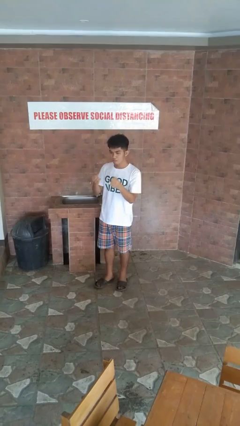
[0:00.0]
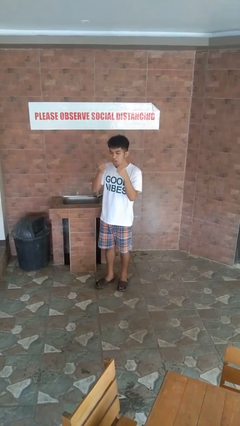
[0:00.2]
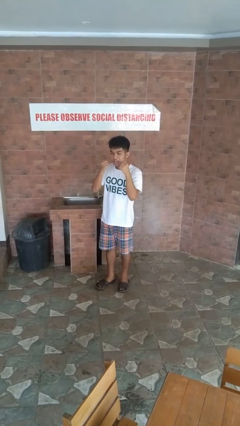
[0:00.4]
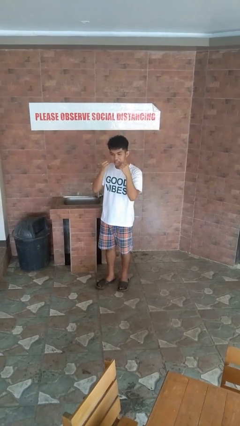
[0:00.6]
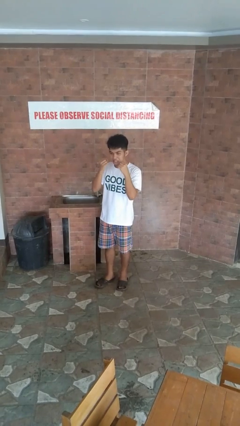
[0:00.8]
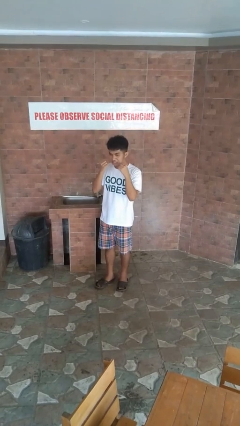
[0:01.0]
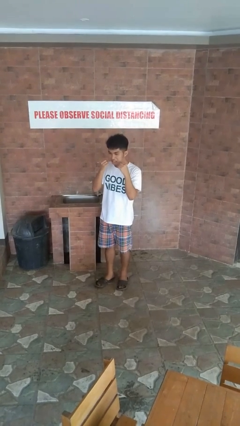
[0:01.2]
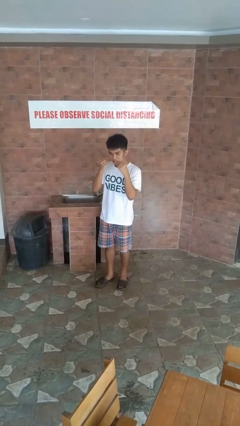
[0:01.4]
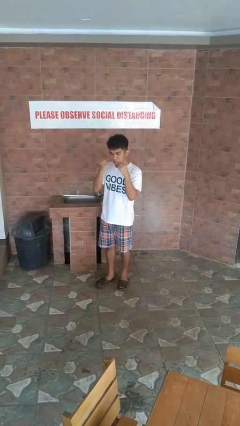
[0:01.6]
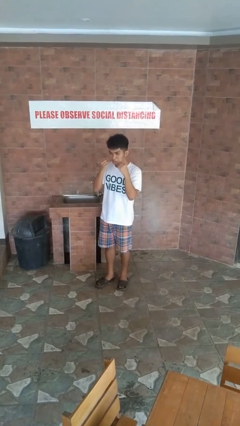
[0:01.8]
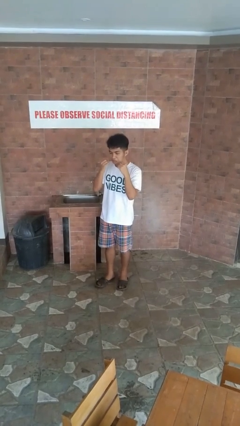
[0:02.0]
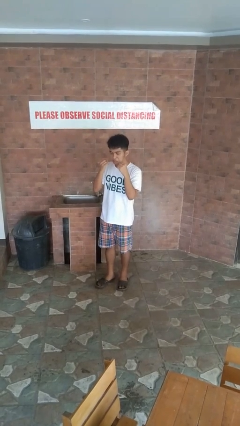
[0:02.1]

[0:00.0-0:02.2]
person flosses

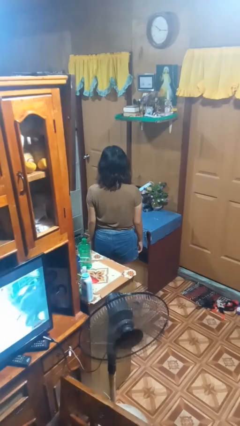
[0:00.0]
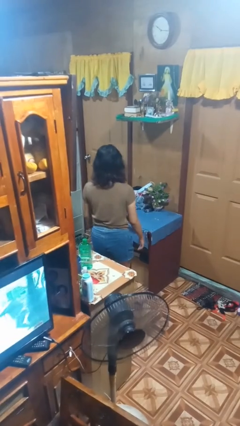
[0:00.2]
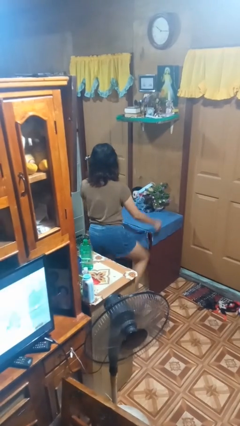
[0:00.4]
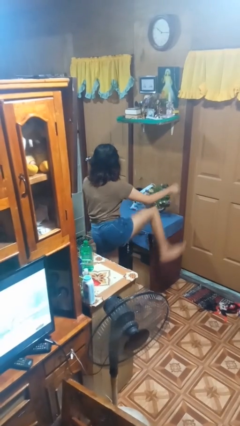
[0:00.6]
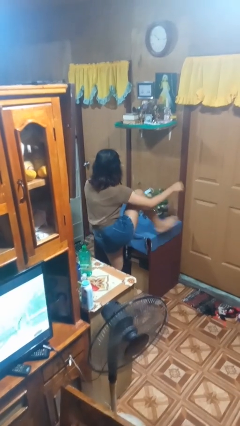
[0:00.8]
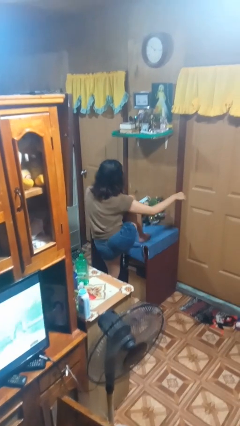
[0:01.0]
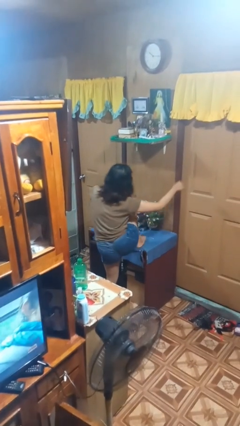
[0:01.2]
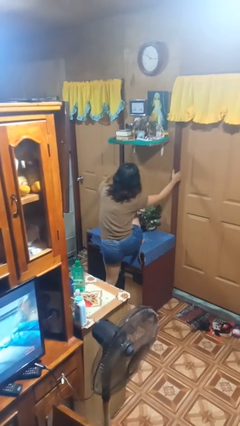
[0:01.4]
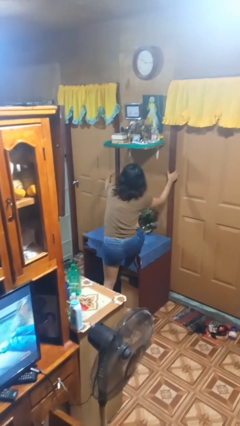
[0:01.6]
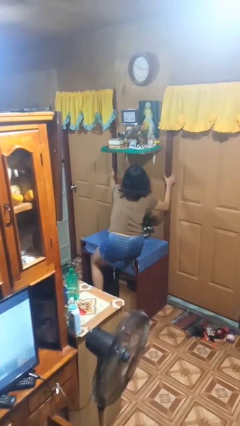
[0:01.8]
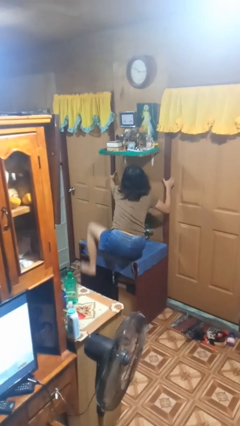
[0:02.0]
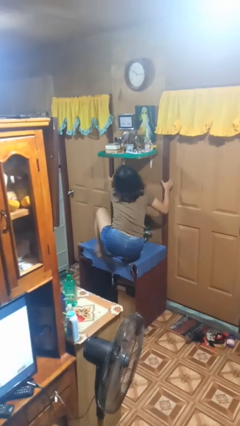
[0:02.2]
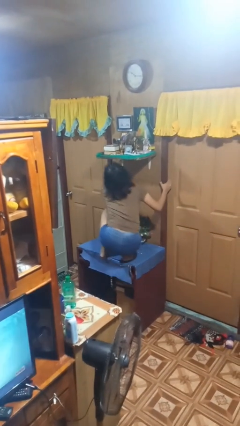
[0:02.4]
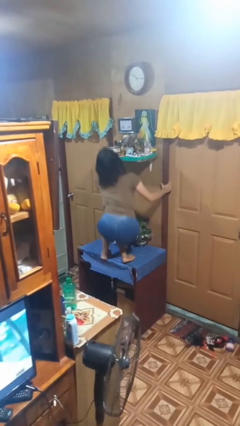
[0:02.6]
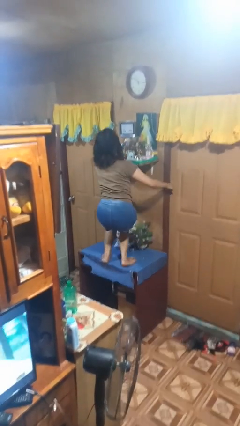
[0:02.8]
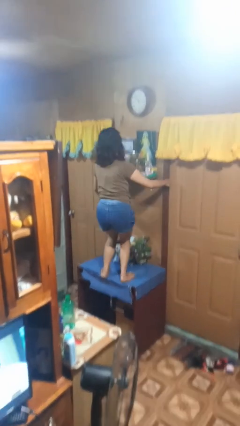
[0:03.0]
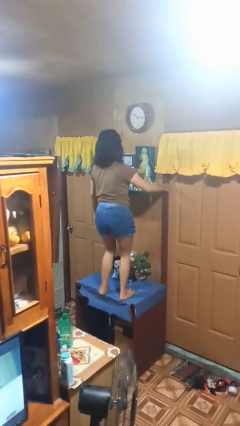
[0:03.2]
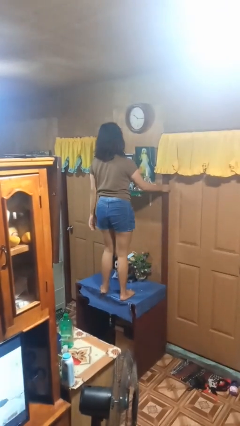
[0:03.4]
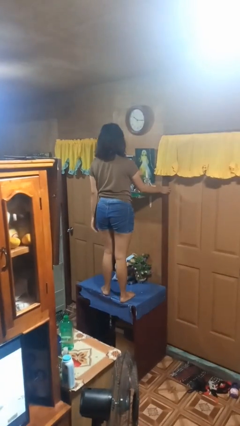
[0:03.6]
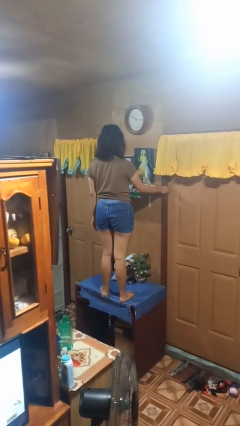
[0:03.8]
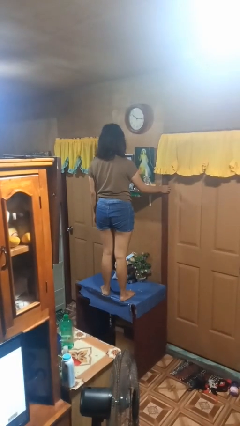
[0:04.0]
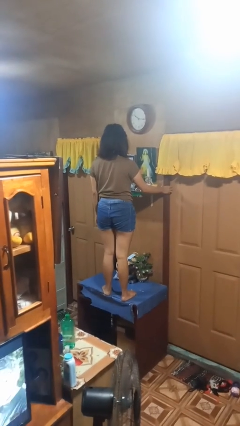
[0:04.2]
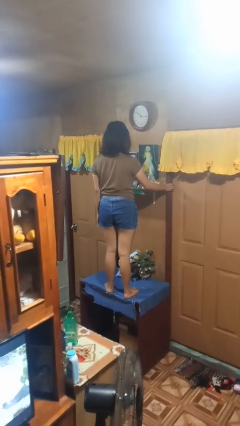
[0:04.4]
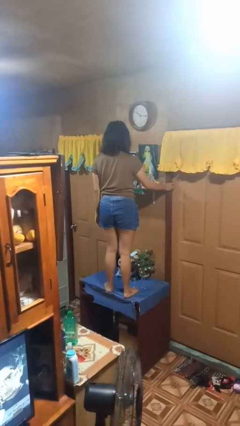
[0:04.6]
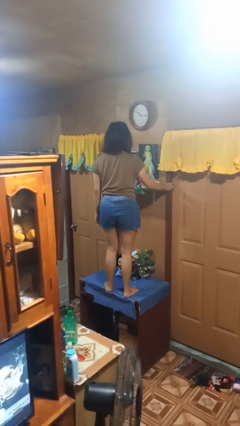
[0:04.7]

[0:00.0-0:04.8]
person climbs on table

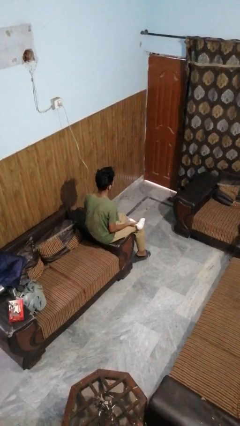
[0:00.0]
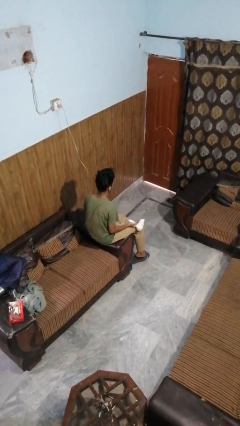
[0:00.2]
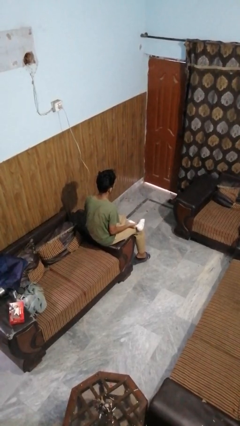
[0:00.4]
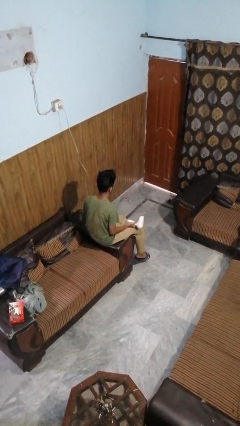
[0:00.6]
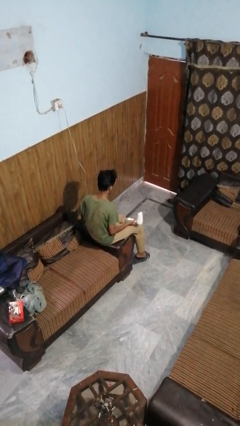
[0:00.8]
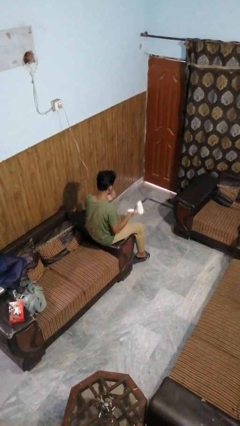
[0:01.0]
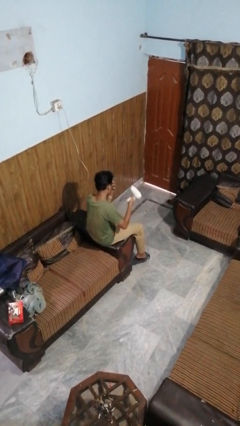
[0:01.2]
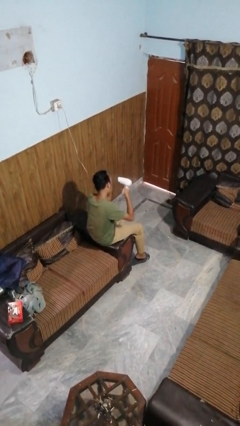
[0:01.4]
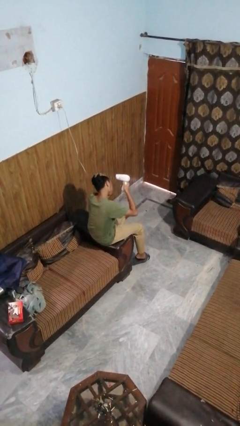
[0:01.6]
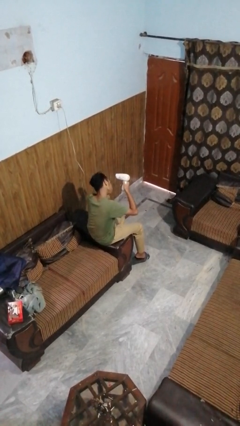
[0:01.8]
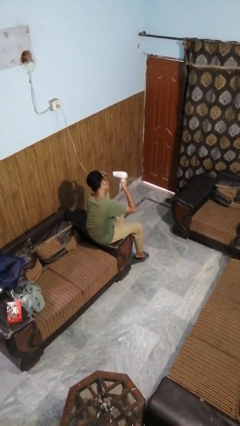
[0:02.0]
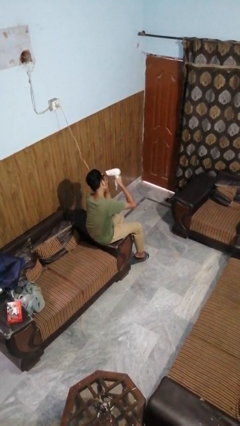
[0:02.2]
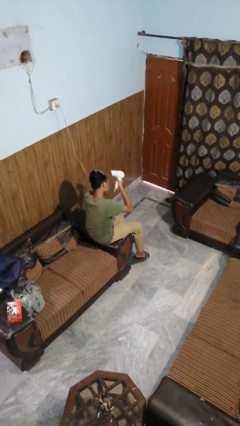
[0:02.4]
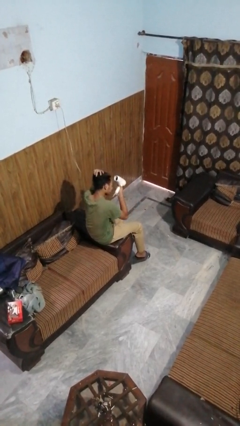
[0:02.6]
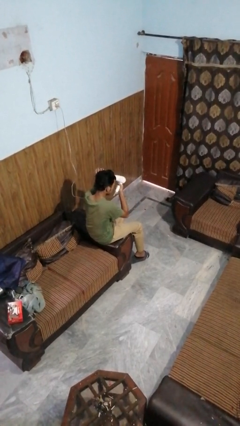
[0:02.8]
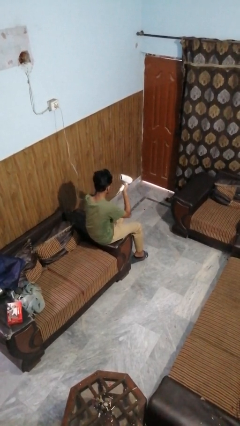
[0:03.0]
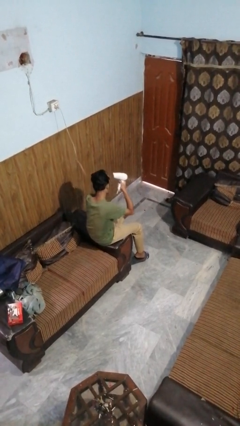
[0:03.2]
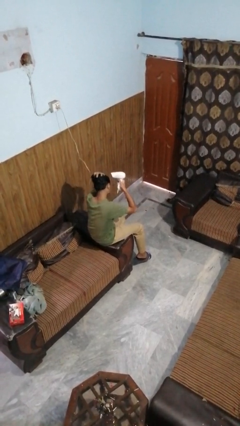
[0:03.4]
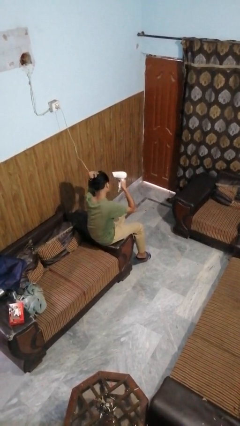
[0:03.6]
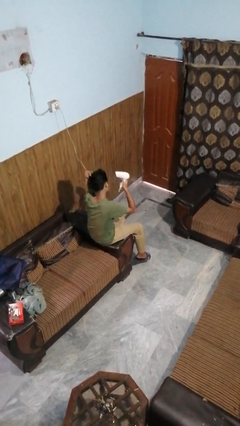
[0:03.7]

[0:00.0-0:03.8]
person dries hair with hairdryer

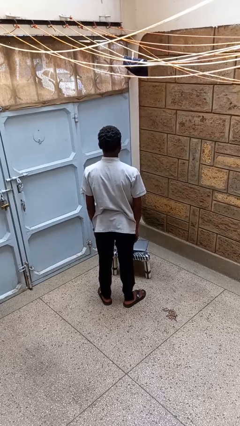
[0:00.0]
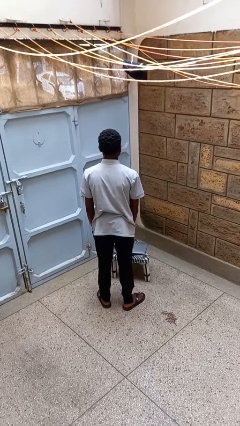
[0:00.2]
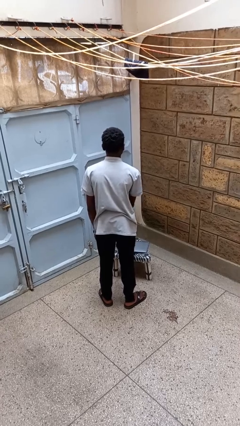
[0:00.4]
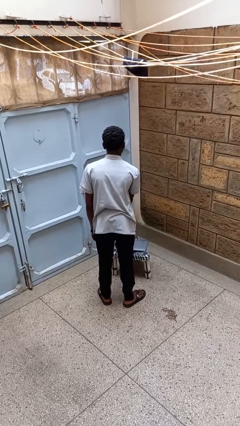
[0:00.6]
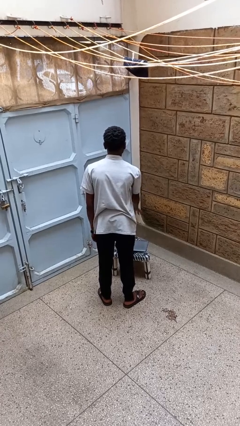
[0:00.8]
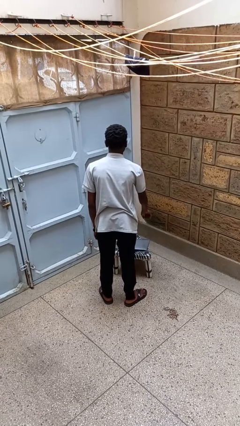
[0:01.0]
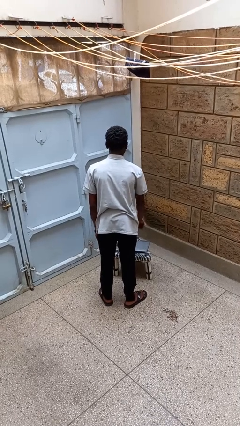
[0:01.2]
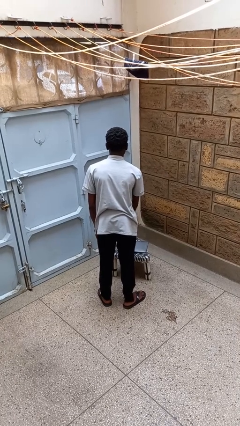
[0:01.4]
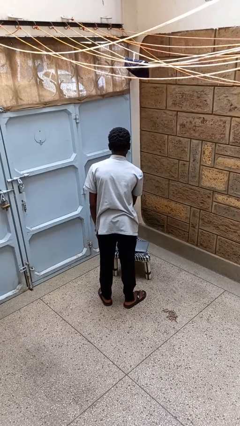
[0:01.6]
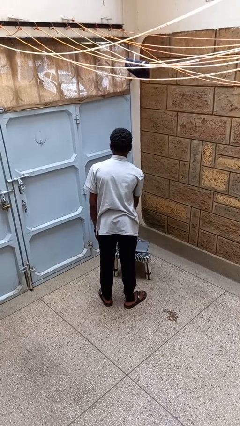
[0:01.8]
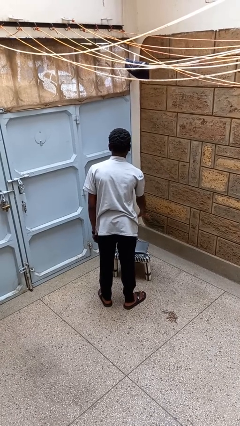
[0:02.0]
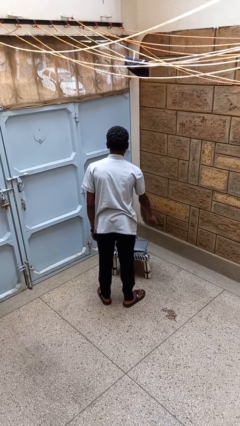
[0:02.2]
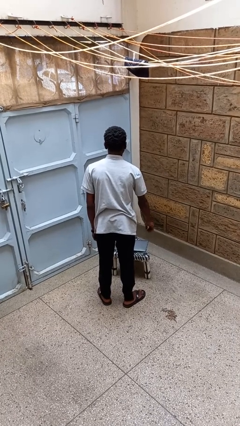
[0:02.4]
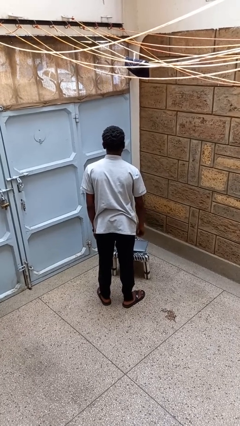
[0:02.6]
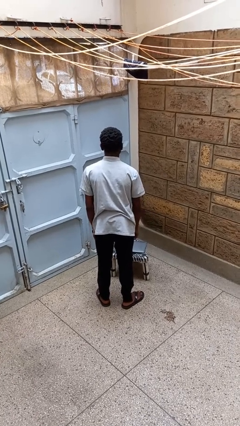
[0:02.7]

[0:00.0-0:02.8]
person waves hand over object

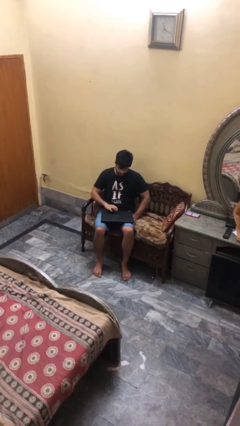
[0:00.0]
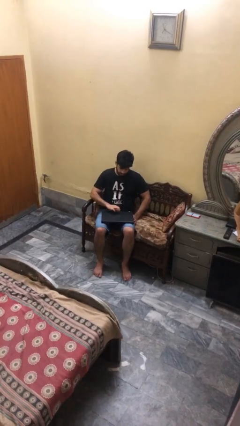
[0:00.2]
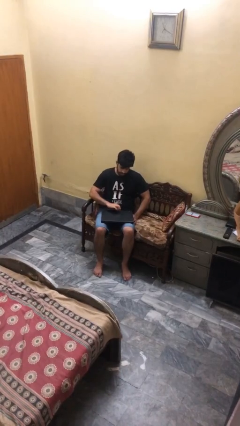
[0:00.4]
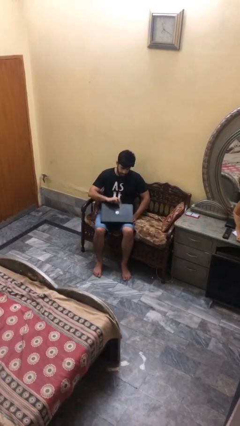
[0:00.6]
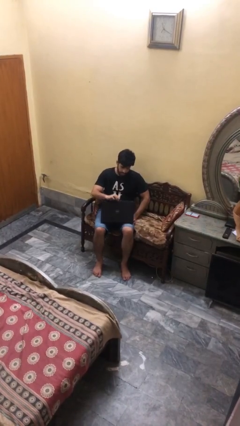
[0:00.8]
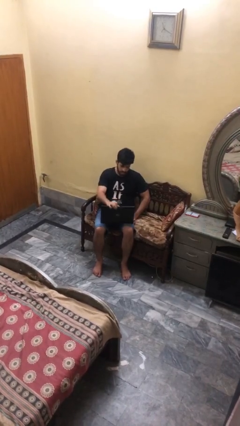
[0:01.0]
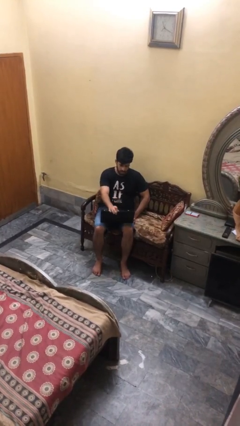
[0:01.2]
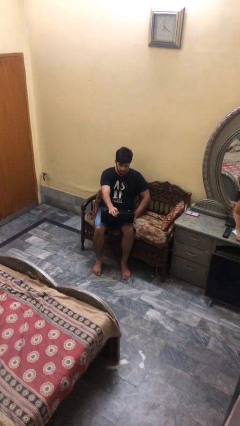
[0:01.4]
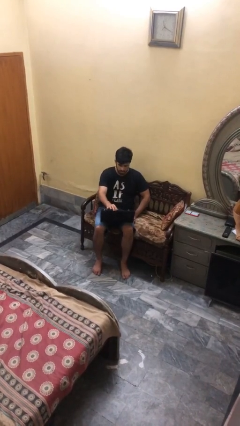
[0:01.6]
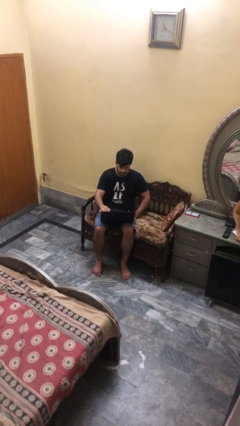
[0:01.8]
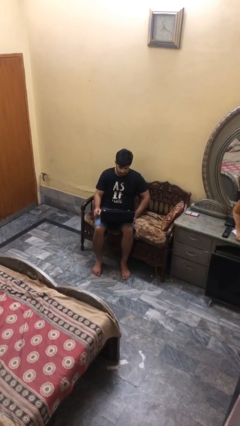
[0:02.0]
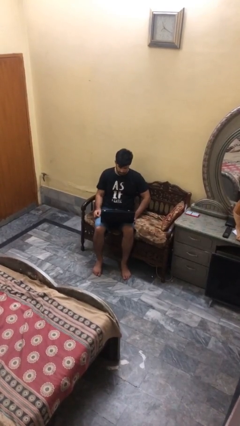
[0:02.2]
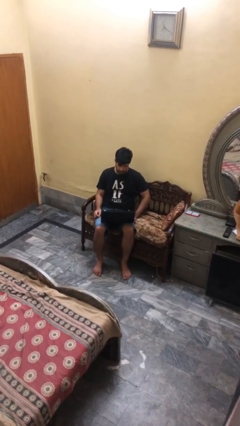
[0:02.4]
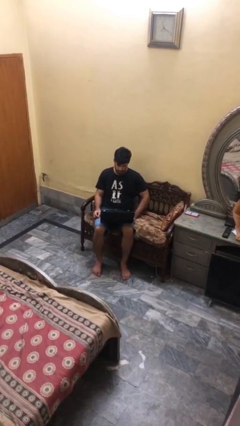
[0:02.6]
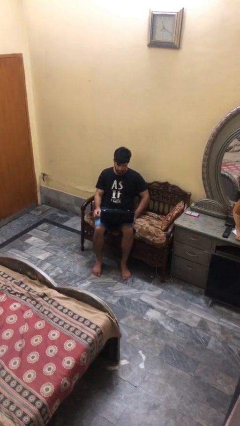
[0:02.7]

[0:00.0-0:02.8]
person opens laptop

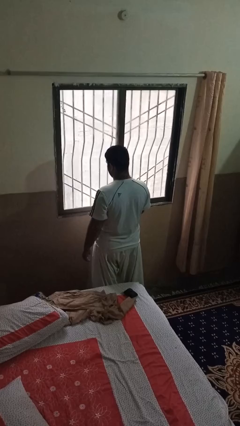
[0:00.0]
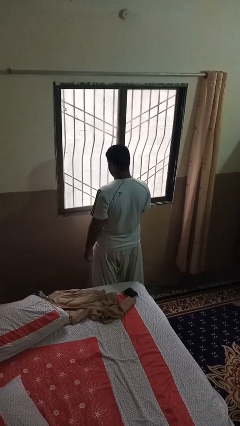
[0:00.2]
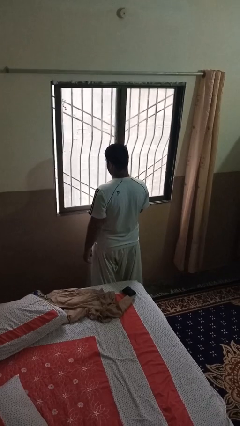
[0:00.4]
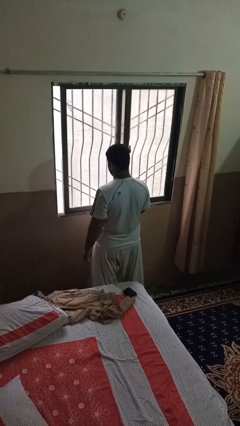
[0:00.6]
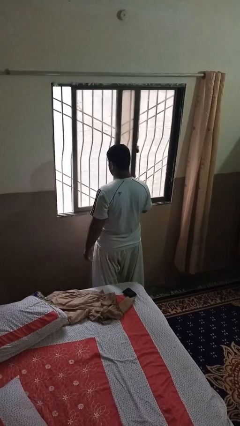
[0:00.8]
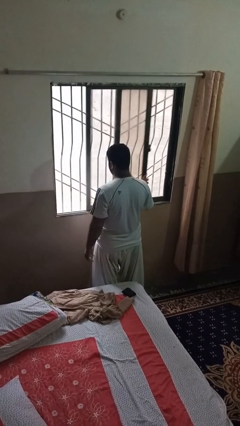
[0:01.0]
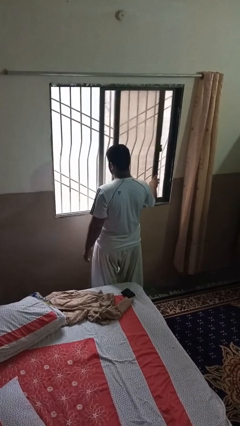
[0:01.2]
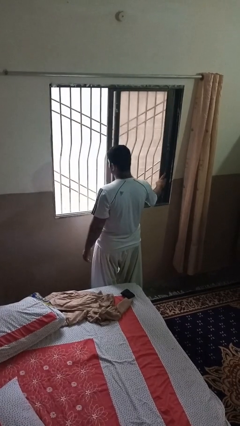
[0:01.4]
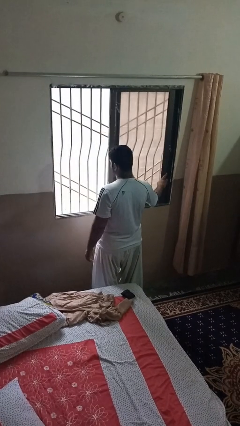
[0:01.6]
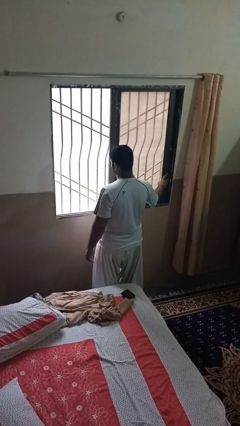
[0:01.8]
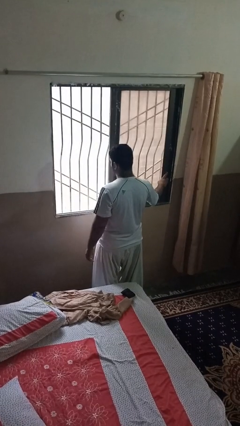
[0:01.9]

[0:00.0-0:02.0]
person opens home window
